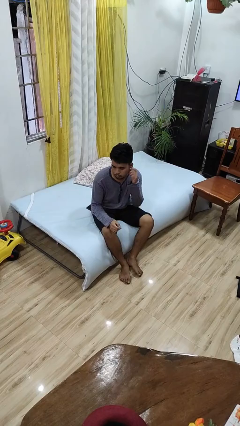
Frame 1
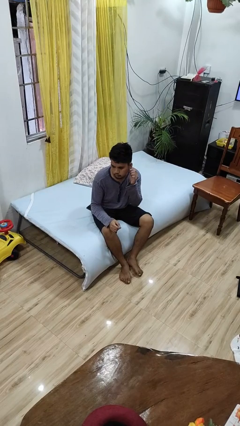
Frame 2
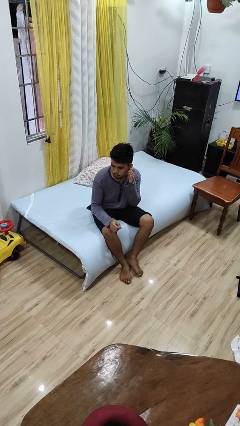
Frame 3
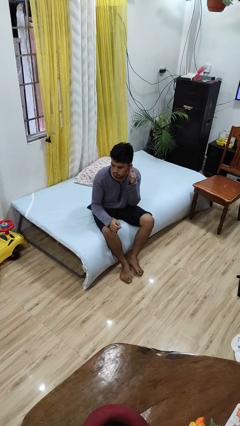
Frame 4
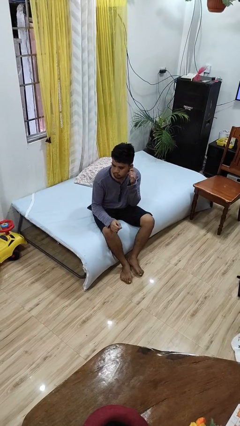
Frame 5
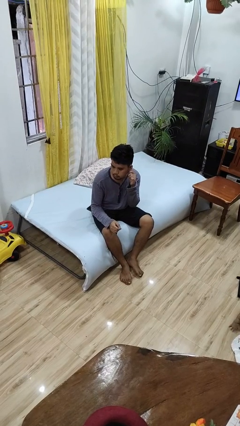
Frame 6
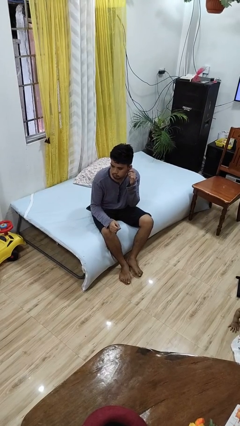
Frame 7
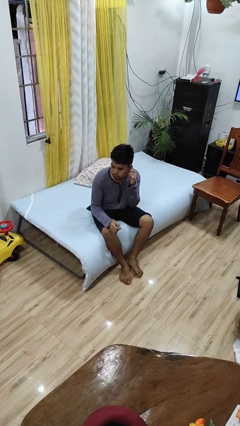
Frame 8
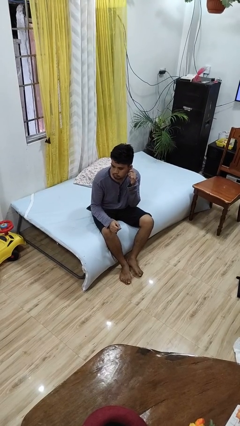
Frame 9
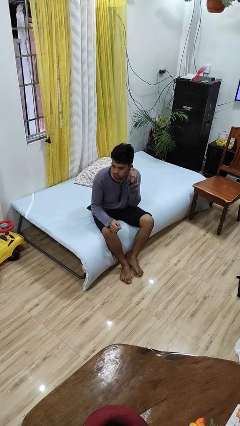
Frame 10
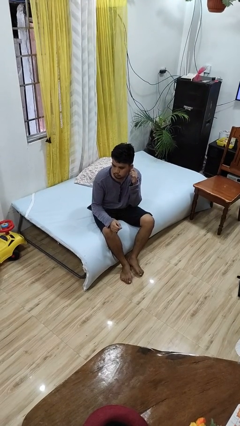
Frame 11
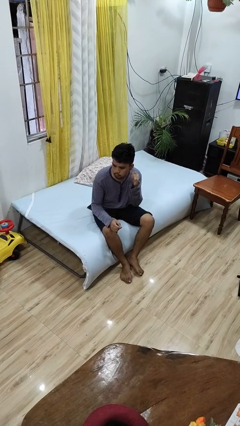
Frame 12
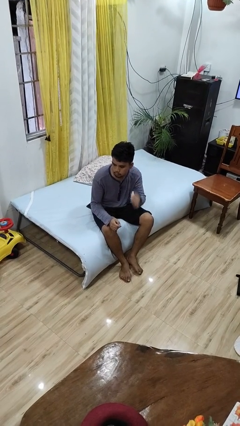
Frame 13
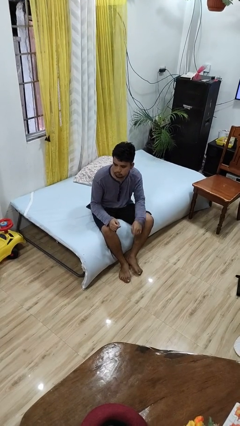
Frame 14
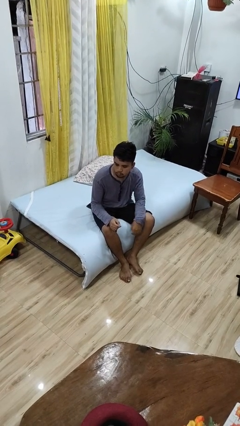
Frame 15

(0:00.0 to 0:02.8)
person touches earlobe

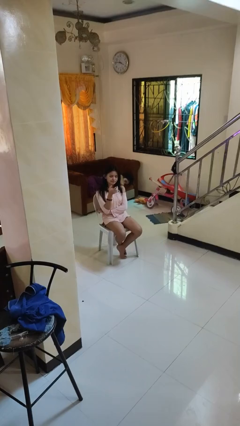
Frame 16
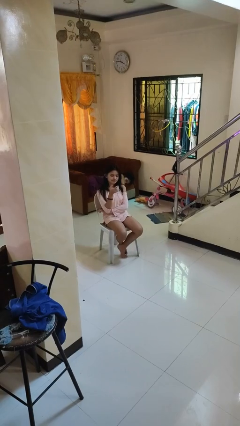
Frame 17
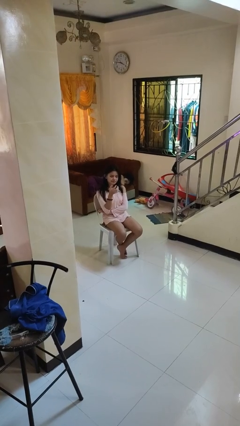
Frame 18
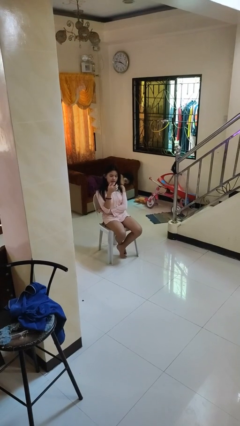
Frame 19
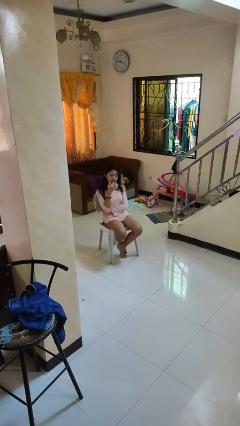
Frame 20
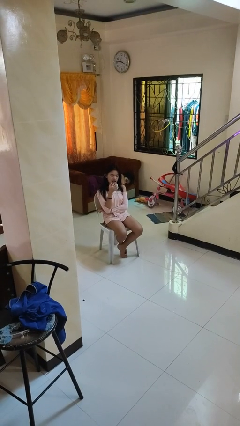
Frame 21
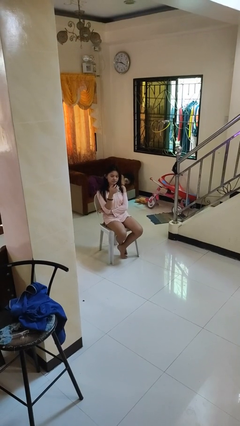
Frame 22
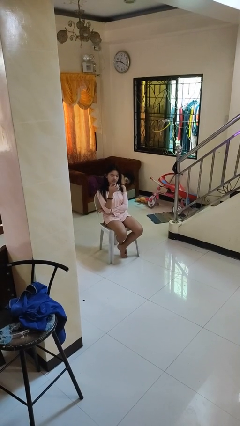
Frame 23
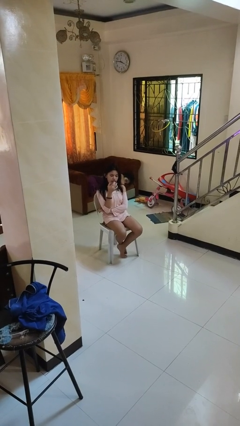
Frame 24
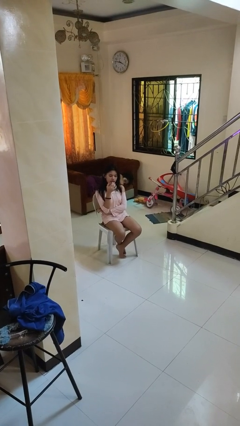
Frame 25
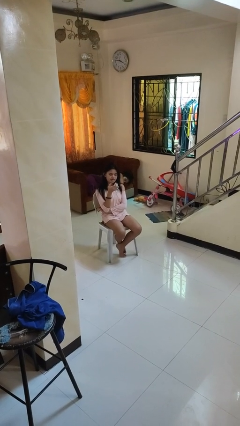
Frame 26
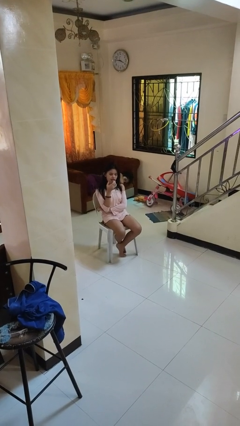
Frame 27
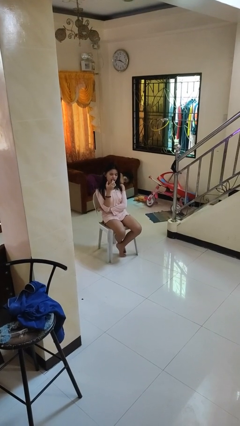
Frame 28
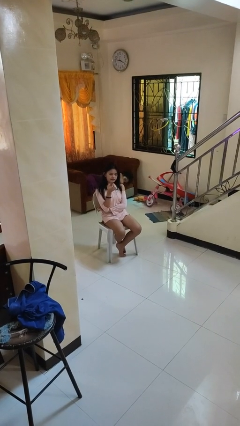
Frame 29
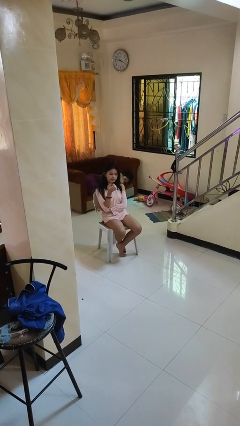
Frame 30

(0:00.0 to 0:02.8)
person licks fingers

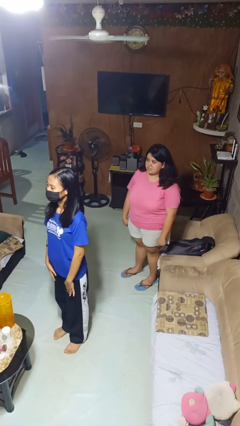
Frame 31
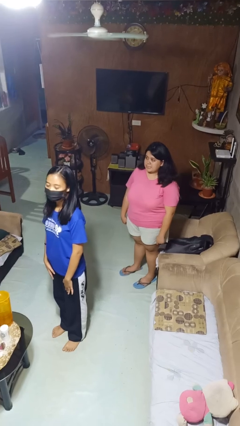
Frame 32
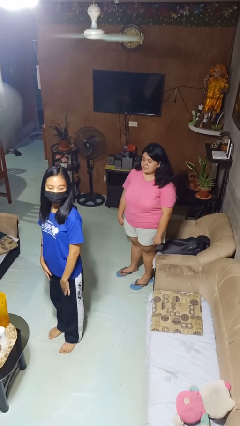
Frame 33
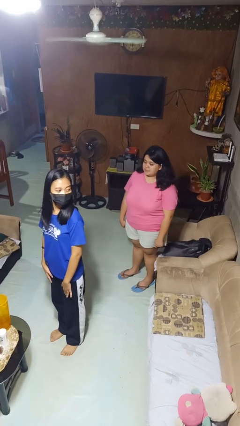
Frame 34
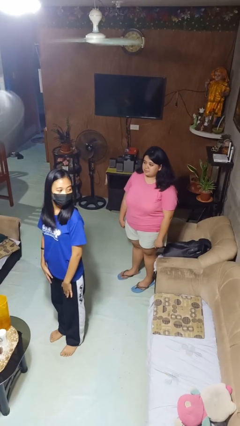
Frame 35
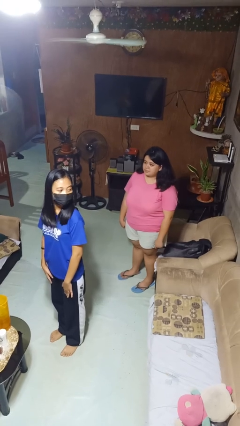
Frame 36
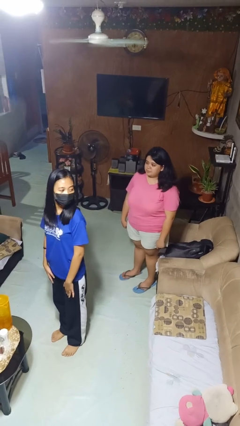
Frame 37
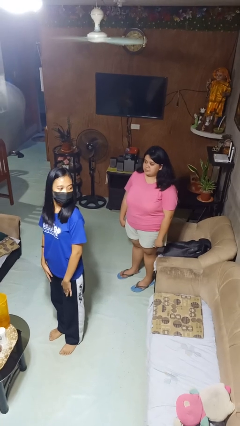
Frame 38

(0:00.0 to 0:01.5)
person looks over shoulder

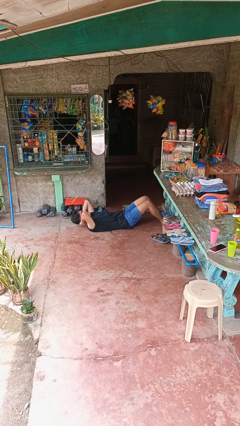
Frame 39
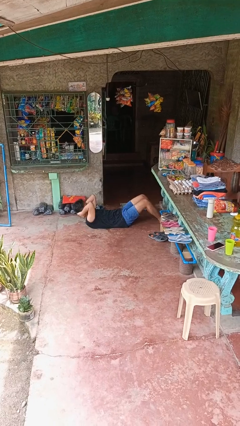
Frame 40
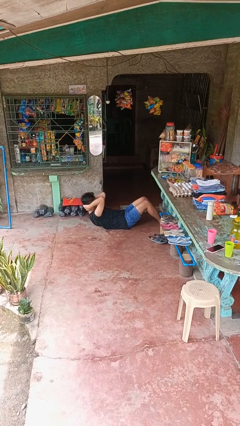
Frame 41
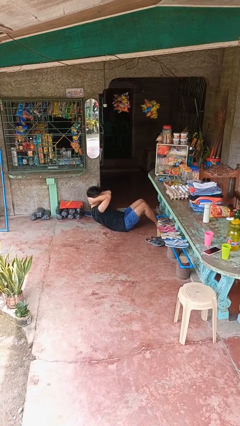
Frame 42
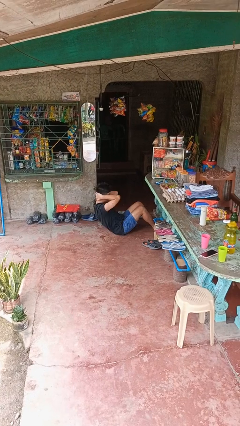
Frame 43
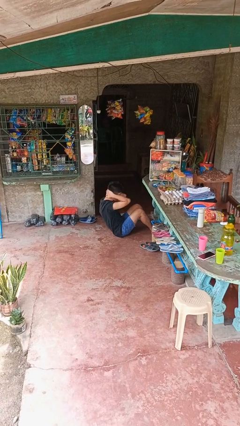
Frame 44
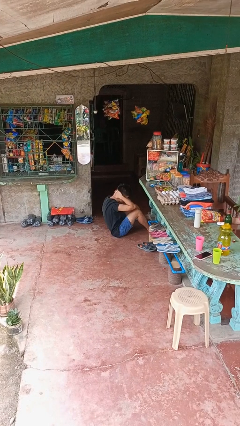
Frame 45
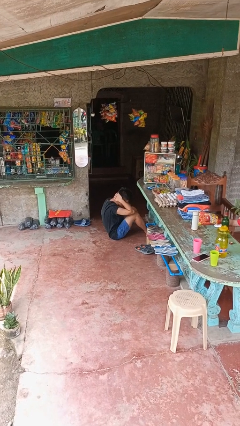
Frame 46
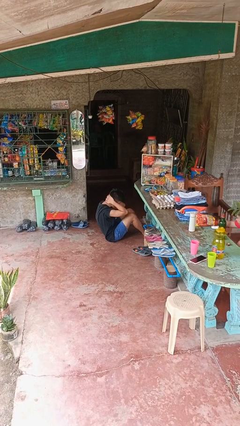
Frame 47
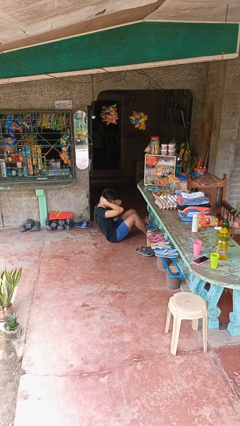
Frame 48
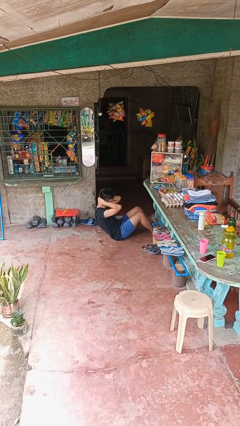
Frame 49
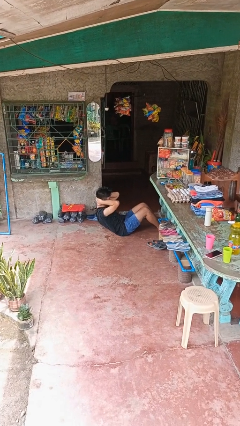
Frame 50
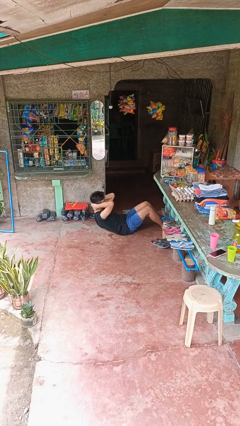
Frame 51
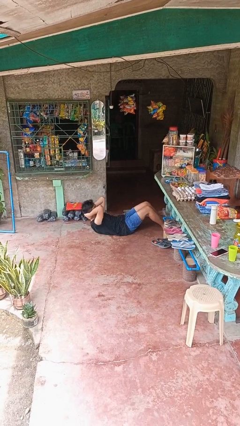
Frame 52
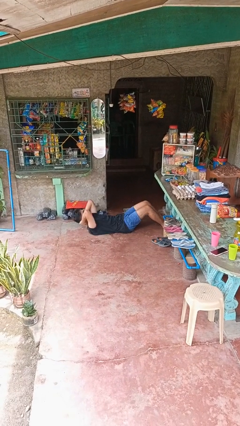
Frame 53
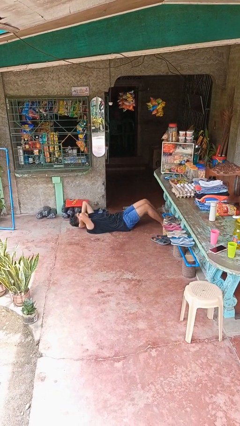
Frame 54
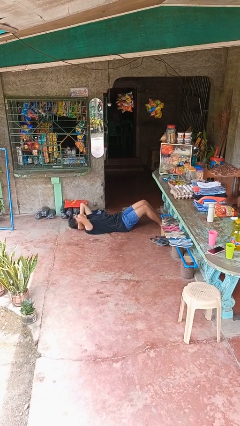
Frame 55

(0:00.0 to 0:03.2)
person exercises with situp

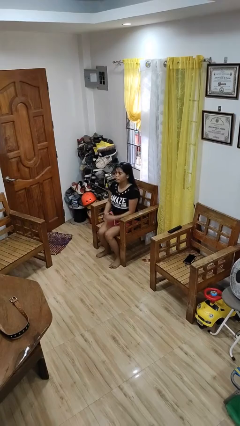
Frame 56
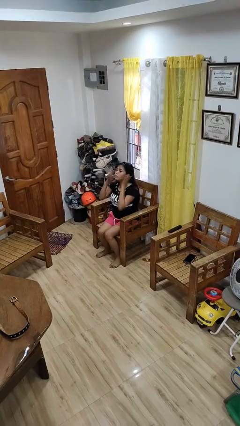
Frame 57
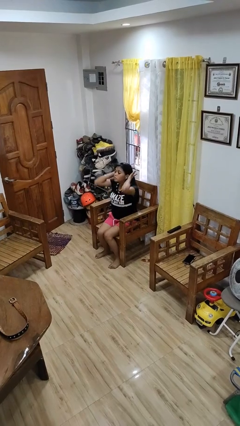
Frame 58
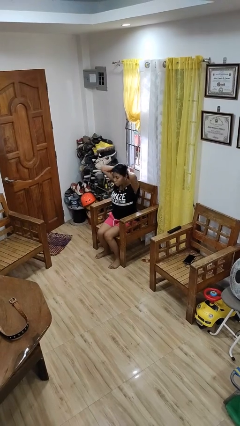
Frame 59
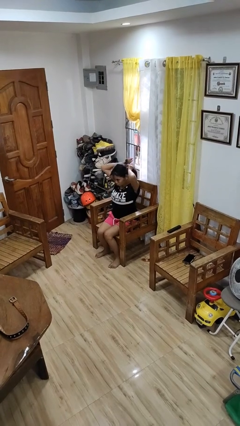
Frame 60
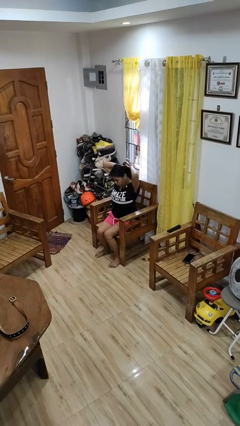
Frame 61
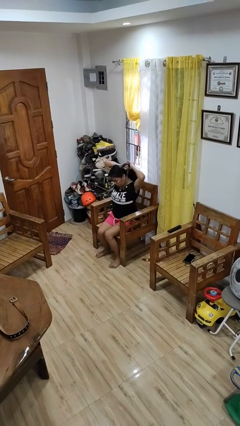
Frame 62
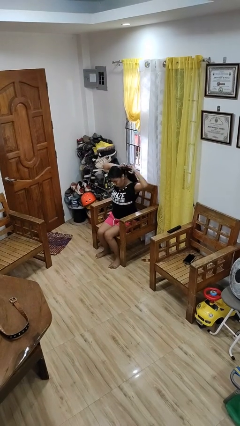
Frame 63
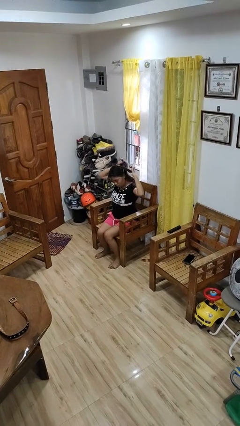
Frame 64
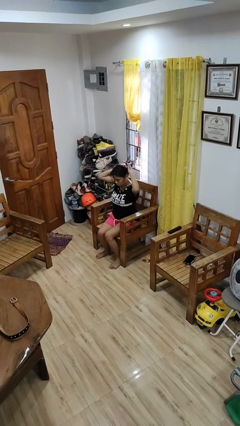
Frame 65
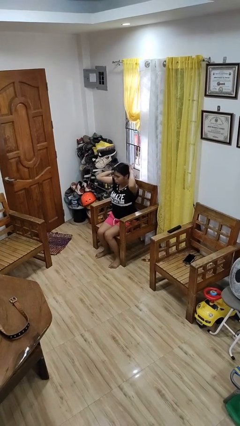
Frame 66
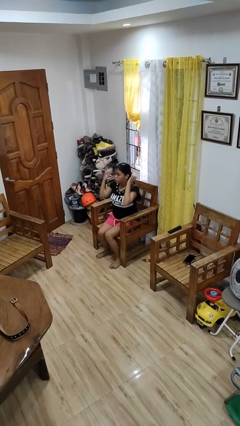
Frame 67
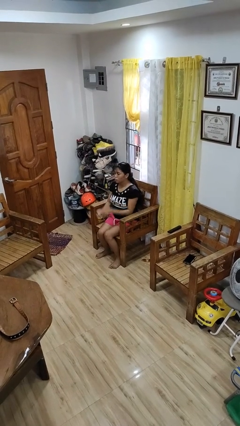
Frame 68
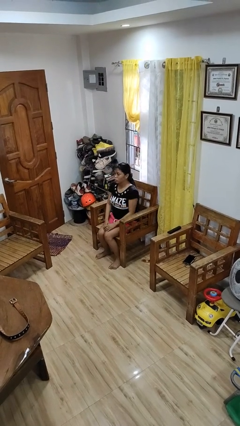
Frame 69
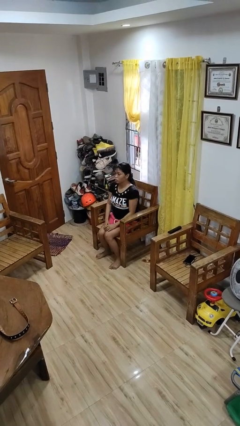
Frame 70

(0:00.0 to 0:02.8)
person puts hair in ponytail

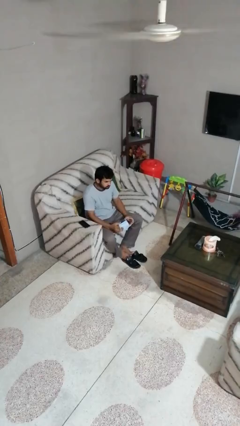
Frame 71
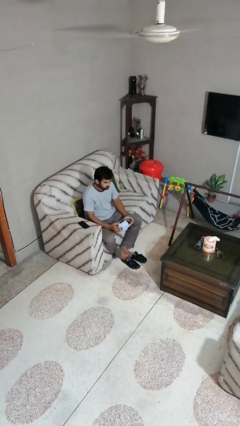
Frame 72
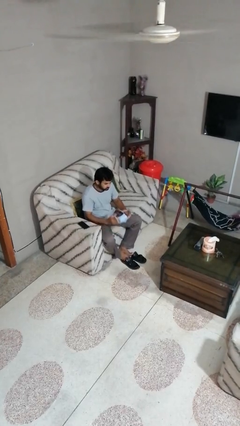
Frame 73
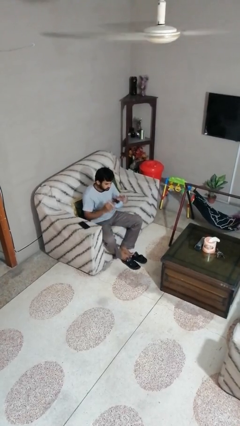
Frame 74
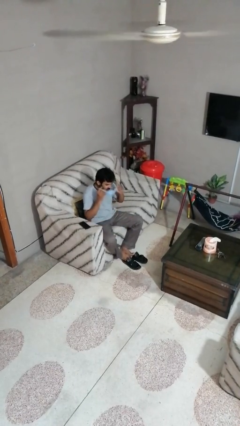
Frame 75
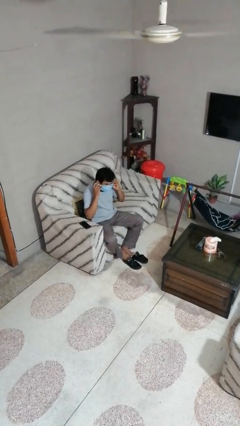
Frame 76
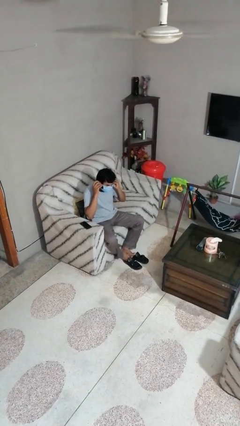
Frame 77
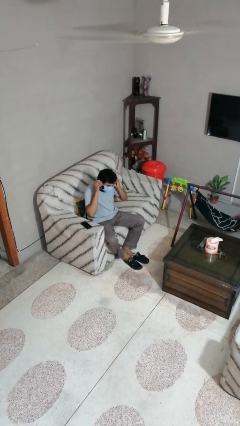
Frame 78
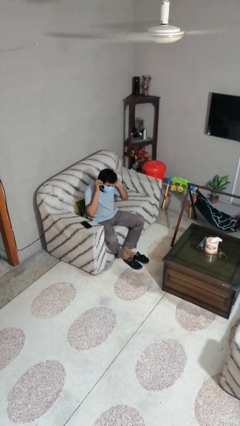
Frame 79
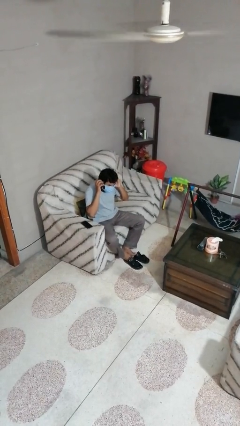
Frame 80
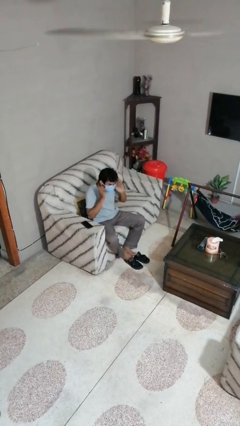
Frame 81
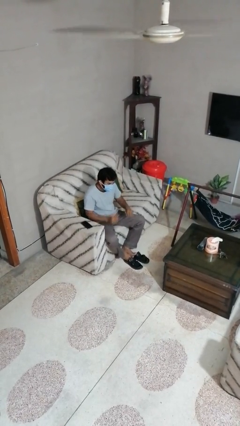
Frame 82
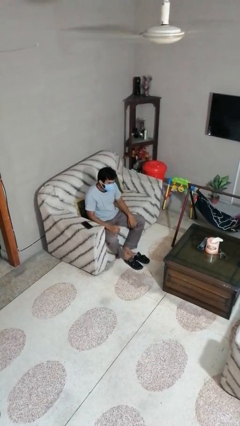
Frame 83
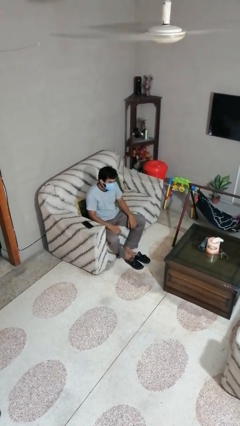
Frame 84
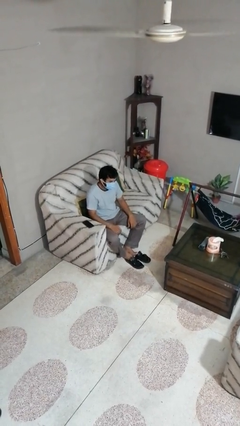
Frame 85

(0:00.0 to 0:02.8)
person puts on facemask

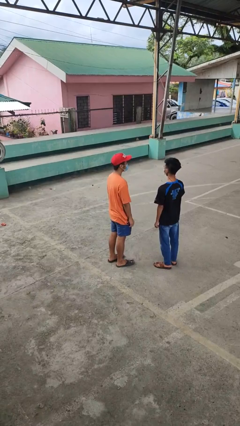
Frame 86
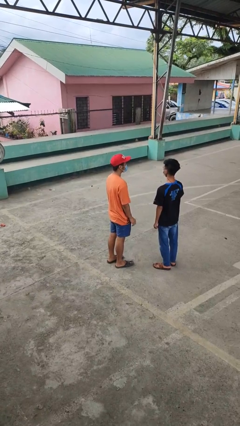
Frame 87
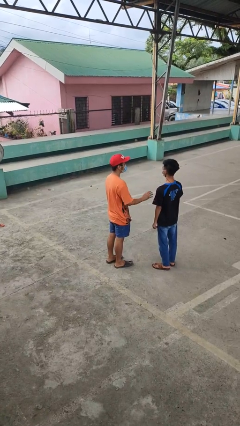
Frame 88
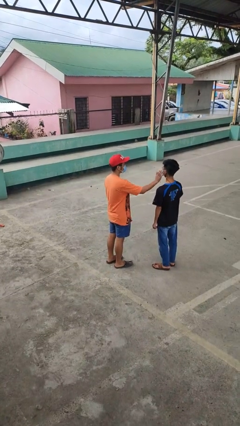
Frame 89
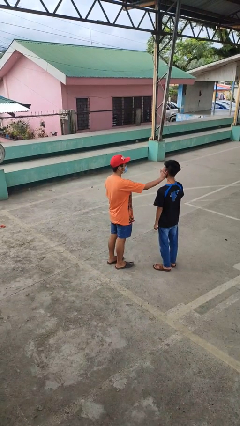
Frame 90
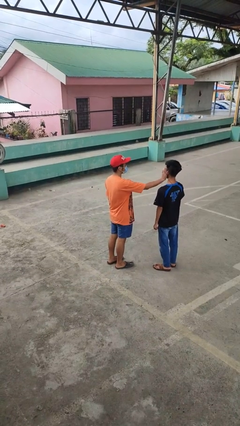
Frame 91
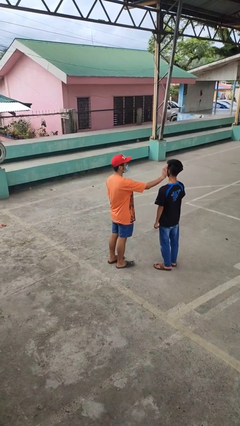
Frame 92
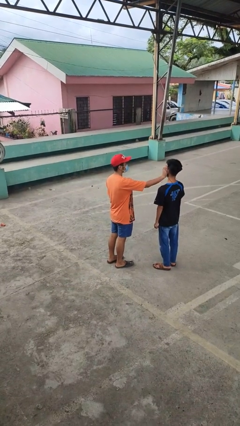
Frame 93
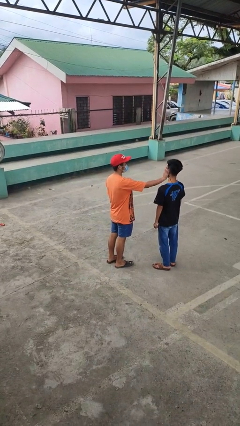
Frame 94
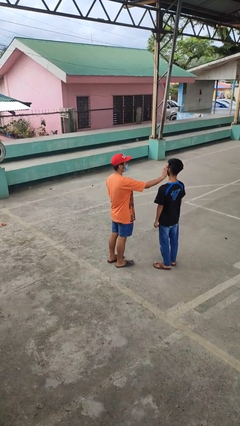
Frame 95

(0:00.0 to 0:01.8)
person touches face of person
